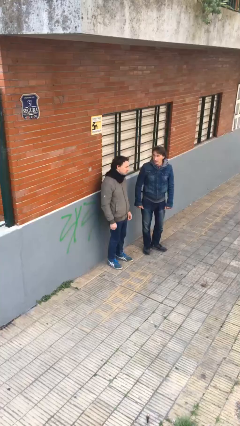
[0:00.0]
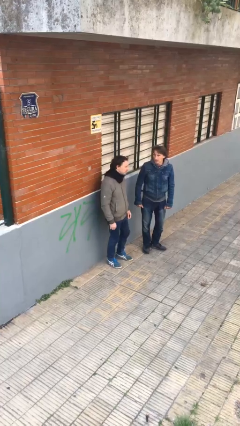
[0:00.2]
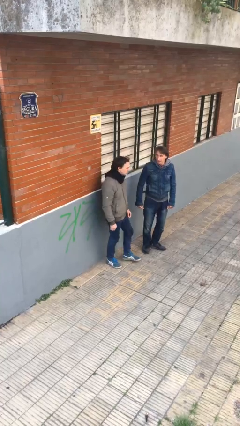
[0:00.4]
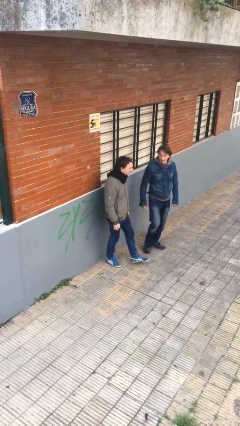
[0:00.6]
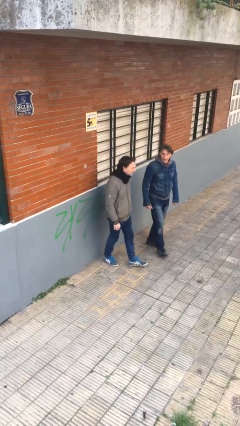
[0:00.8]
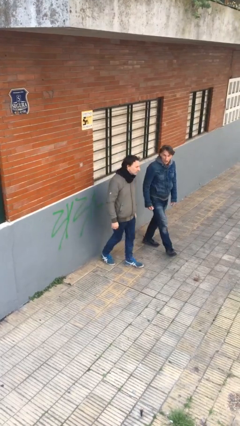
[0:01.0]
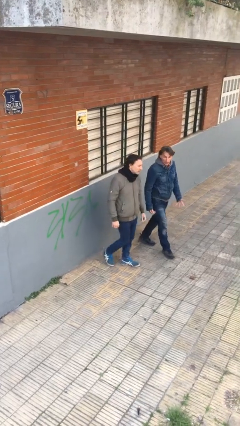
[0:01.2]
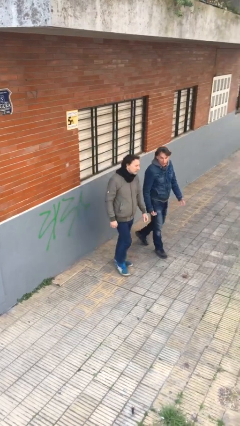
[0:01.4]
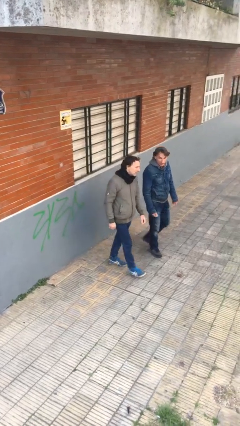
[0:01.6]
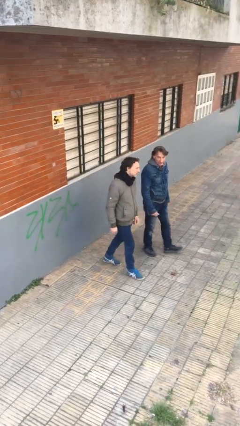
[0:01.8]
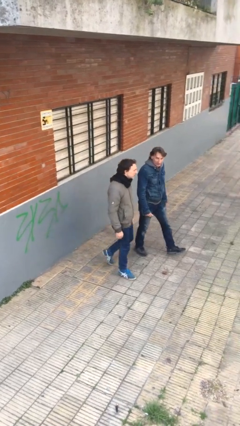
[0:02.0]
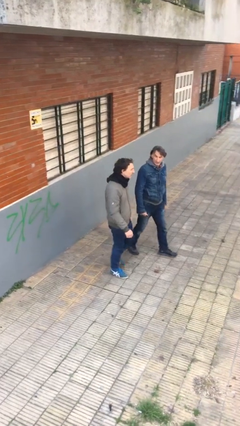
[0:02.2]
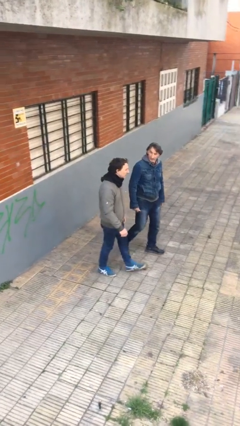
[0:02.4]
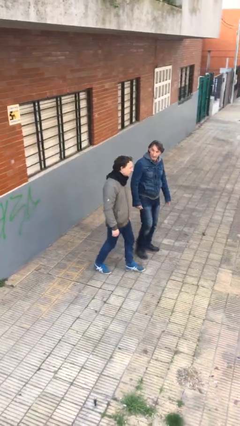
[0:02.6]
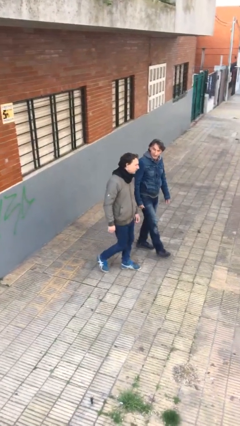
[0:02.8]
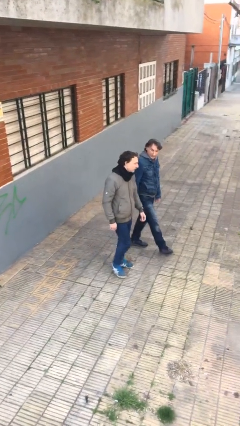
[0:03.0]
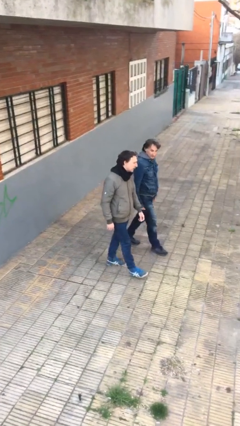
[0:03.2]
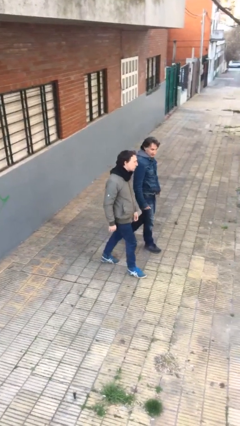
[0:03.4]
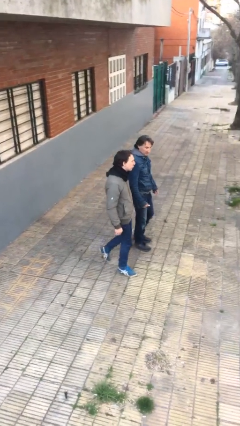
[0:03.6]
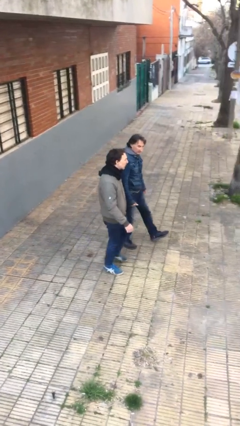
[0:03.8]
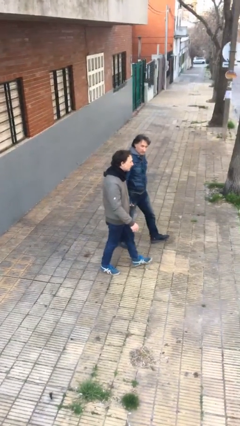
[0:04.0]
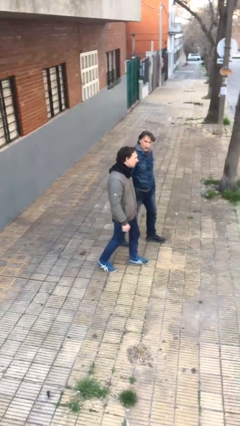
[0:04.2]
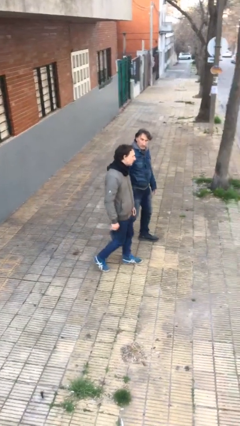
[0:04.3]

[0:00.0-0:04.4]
person talks to person

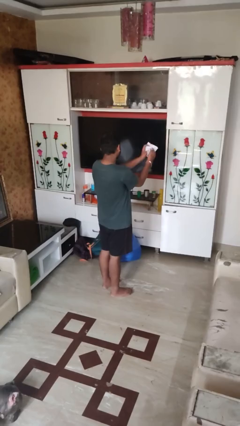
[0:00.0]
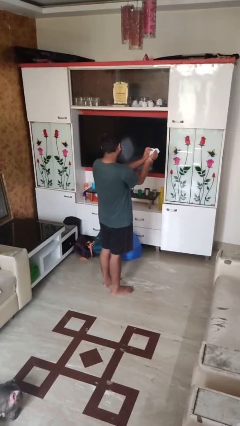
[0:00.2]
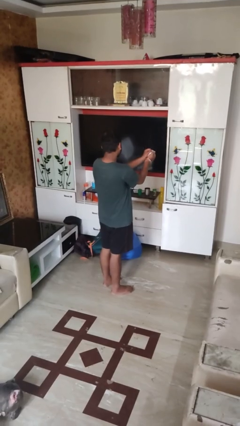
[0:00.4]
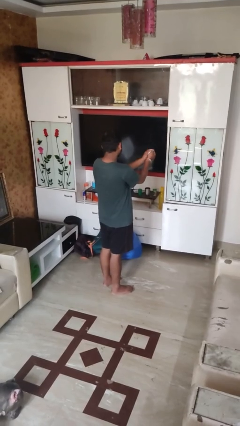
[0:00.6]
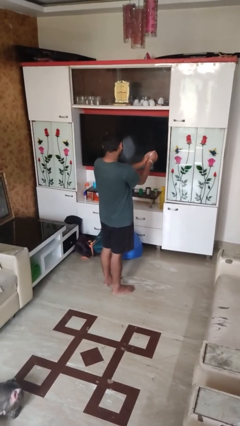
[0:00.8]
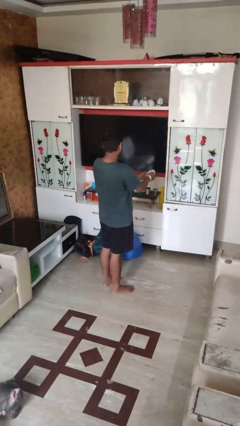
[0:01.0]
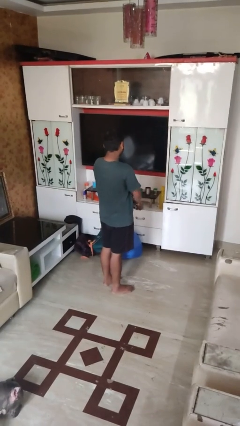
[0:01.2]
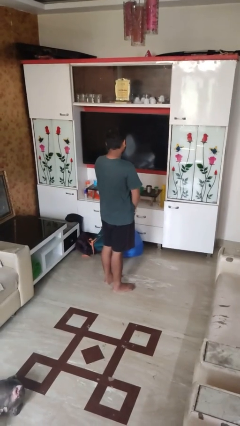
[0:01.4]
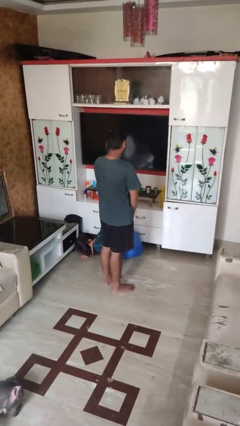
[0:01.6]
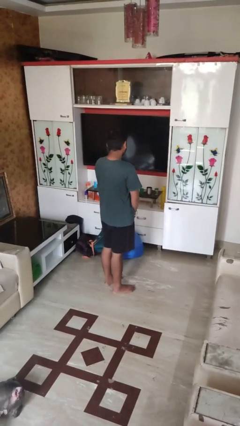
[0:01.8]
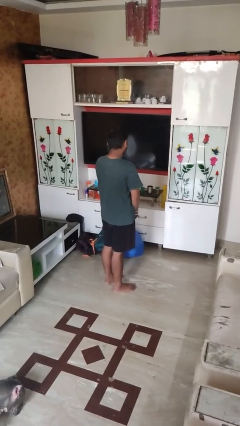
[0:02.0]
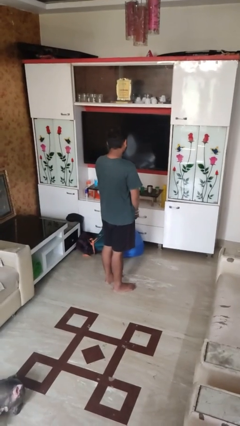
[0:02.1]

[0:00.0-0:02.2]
person crumples paper

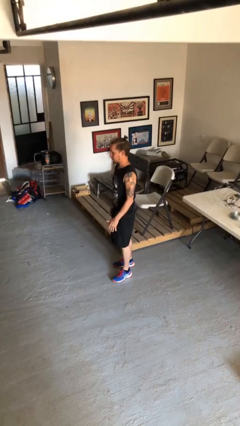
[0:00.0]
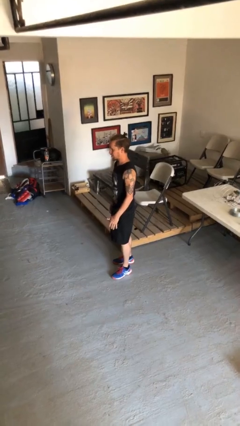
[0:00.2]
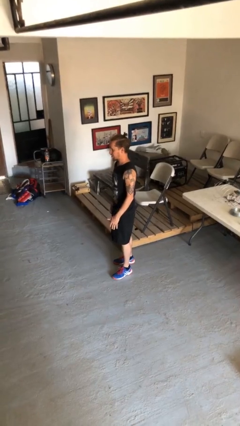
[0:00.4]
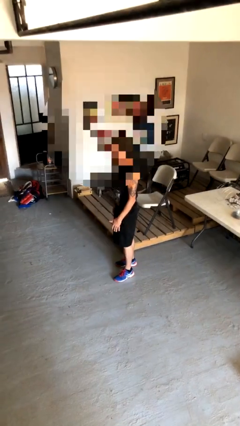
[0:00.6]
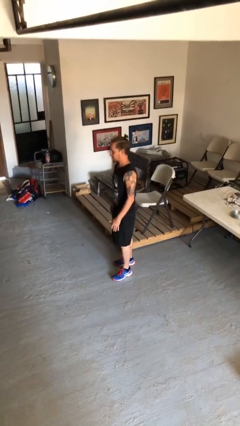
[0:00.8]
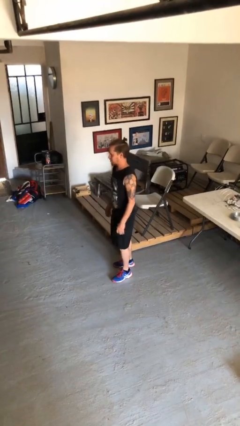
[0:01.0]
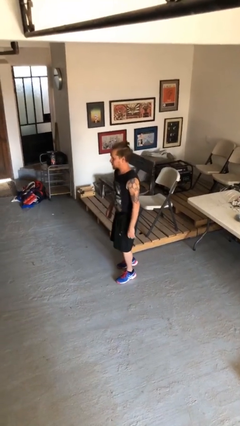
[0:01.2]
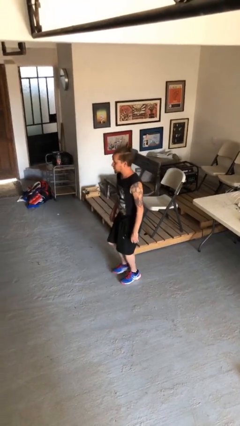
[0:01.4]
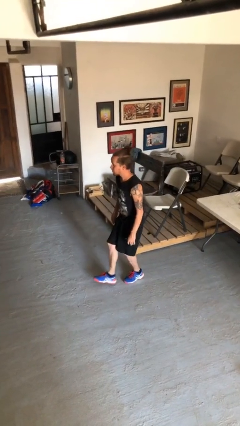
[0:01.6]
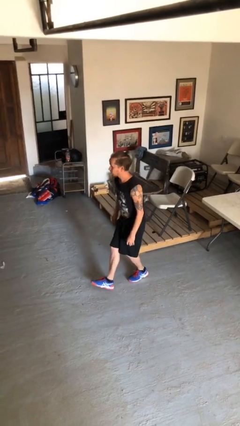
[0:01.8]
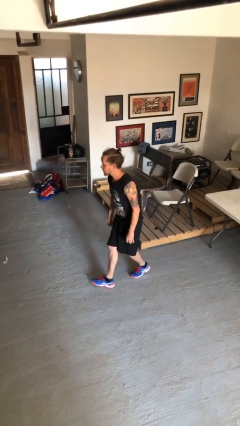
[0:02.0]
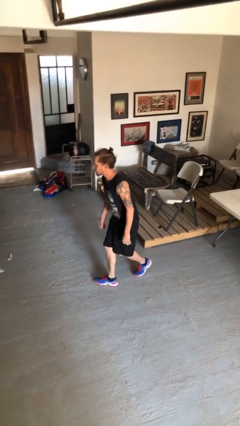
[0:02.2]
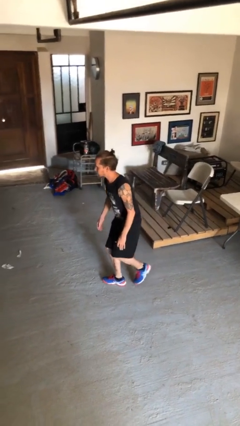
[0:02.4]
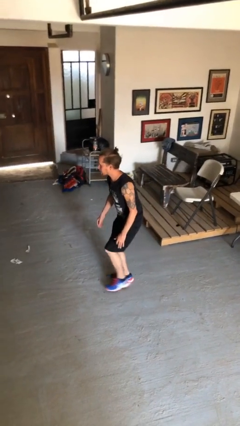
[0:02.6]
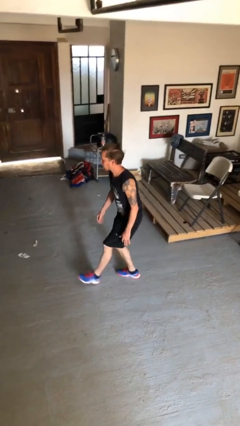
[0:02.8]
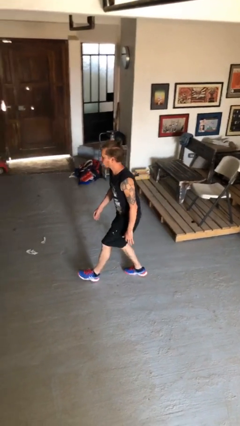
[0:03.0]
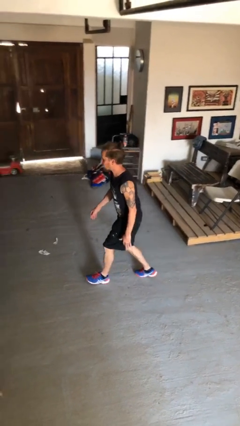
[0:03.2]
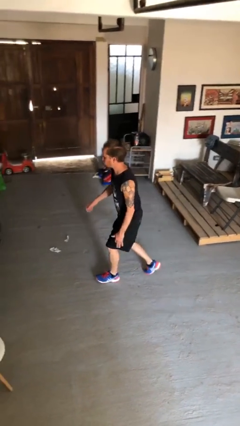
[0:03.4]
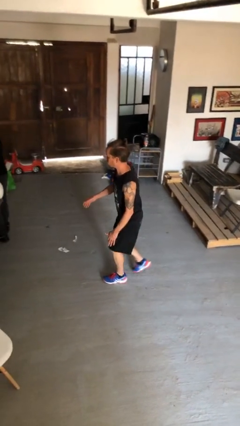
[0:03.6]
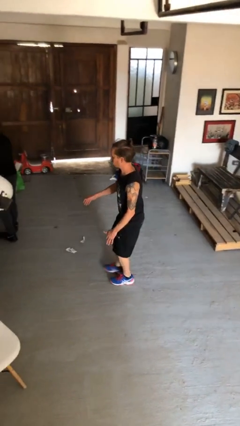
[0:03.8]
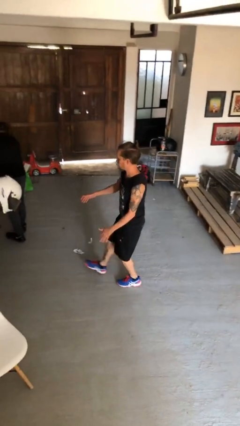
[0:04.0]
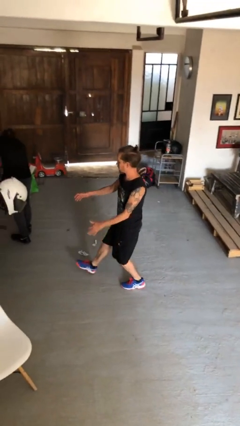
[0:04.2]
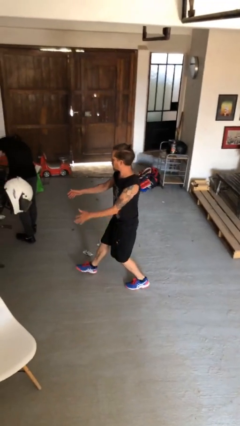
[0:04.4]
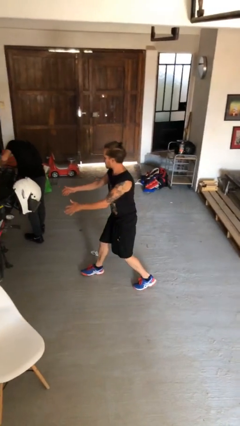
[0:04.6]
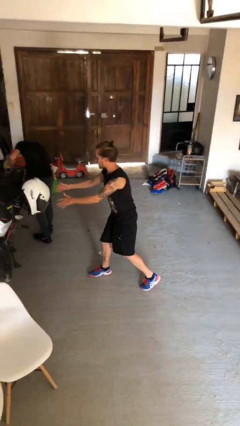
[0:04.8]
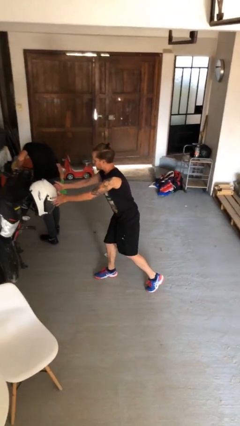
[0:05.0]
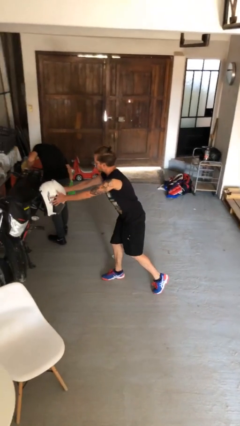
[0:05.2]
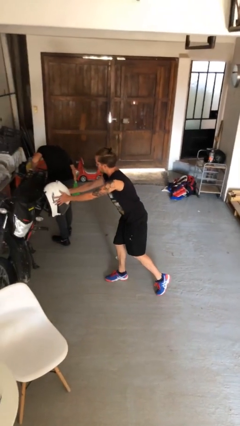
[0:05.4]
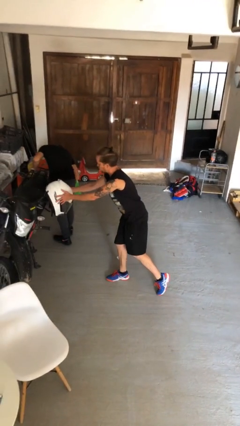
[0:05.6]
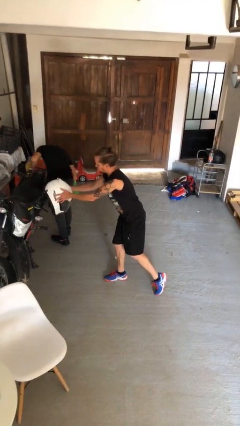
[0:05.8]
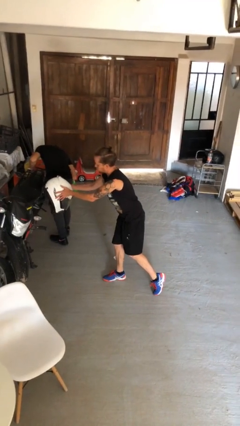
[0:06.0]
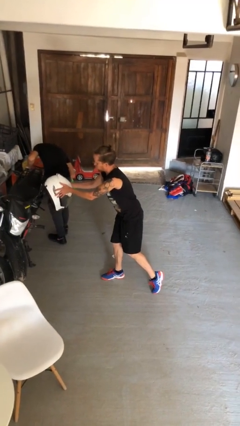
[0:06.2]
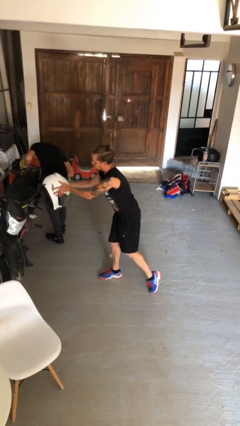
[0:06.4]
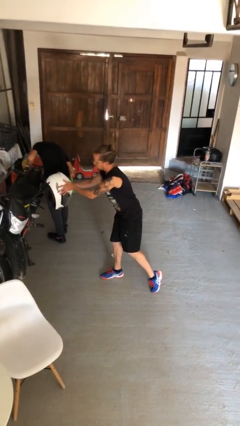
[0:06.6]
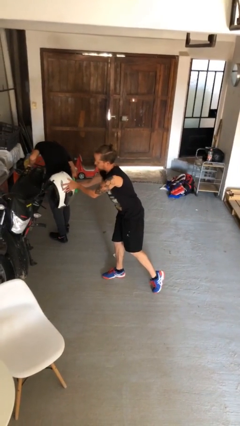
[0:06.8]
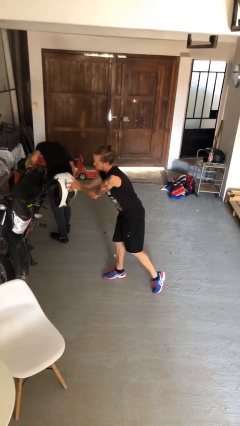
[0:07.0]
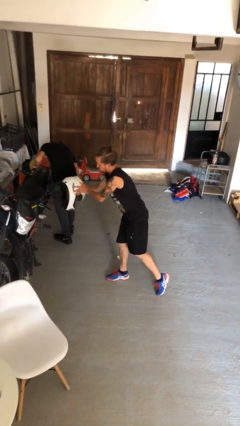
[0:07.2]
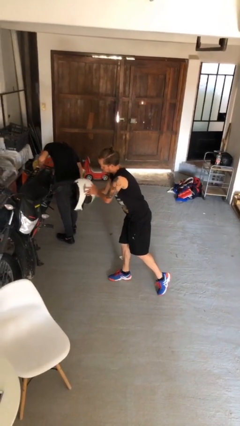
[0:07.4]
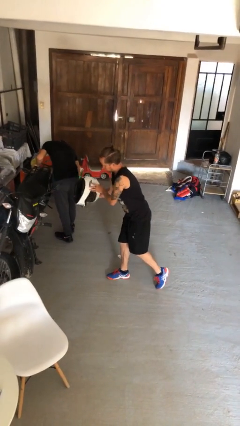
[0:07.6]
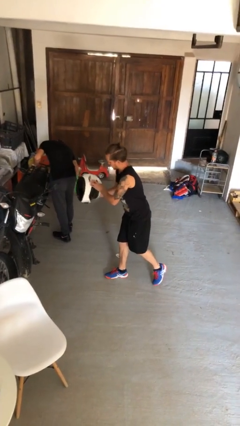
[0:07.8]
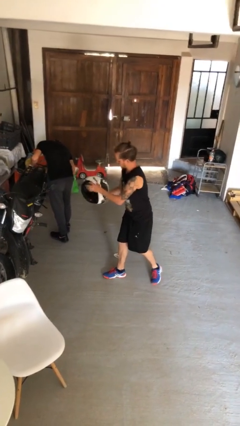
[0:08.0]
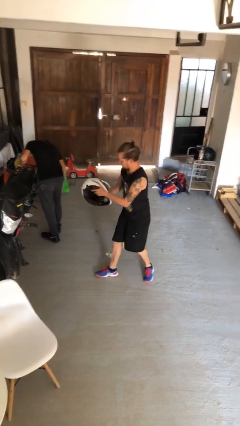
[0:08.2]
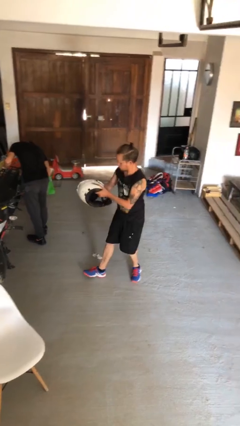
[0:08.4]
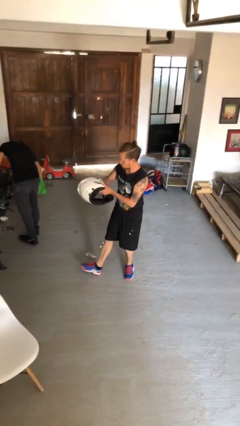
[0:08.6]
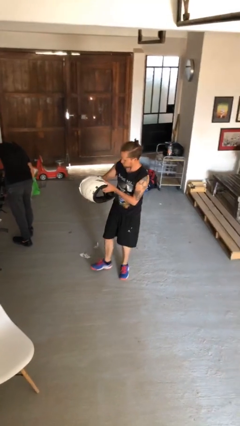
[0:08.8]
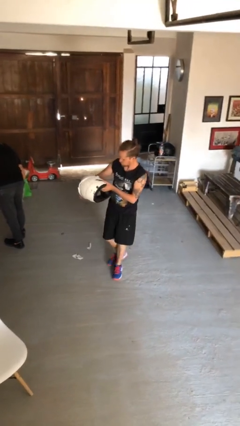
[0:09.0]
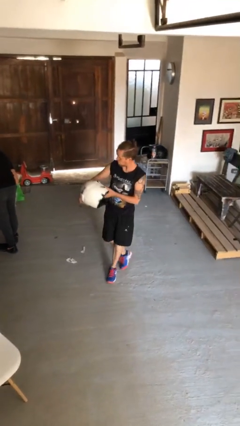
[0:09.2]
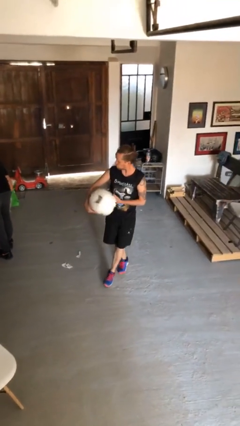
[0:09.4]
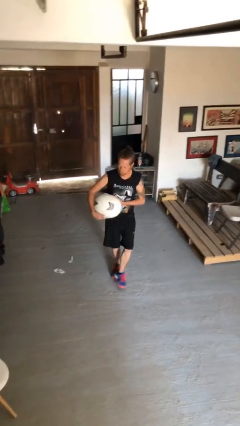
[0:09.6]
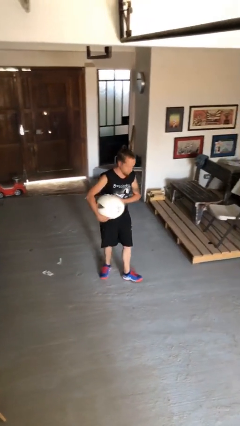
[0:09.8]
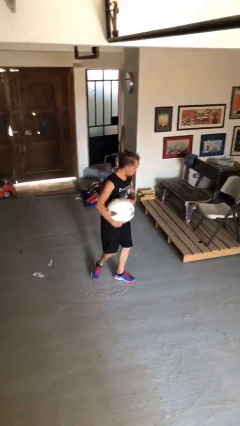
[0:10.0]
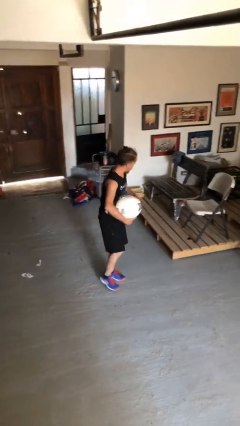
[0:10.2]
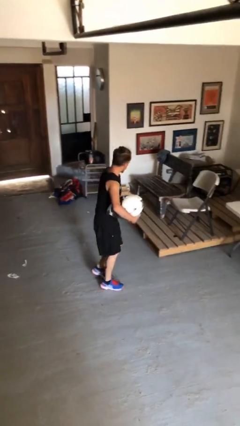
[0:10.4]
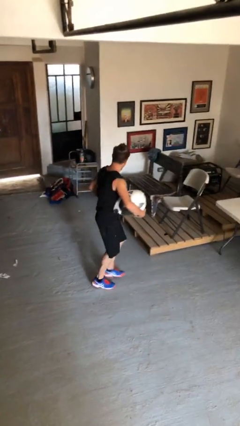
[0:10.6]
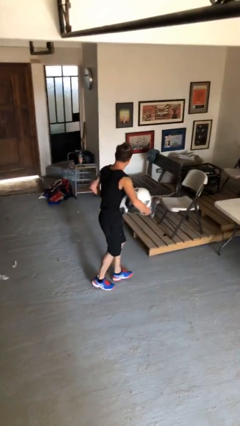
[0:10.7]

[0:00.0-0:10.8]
person steals object from person

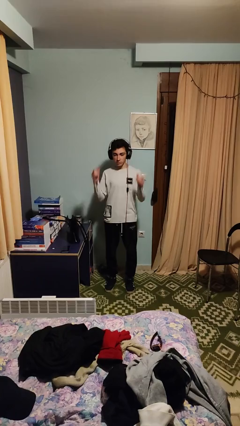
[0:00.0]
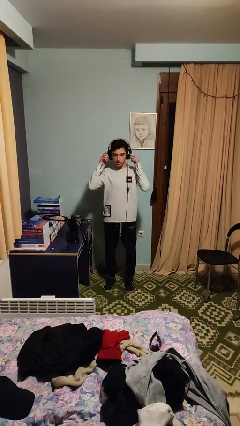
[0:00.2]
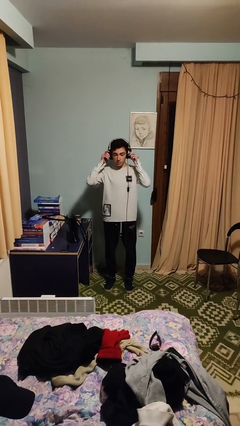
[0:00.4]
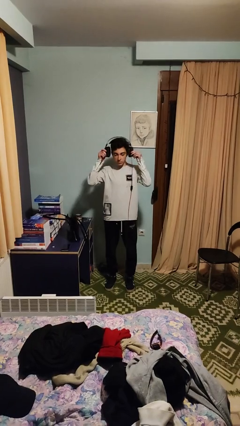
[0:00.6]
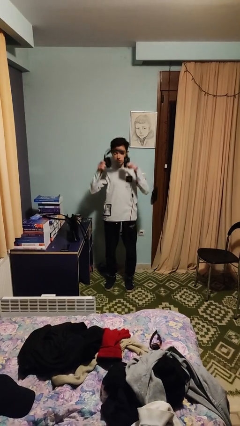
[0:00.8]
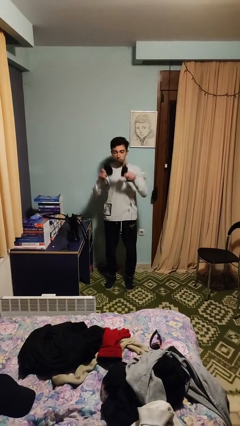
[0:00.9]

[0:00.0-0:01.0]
person takes off headphones
